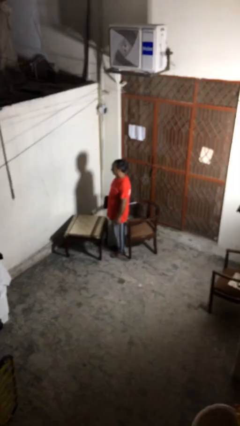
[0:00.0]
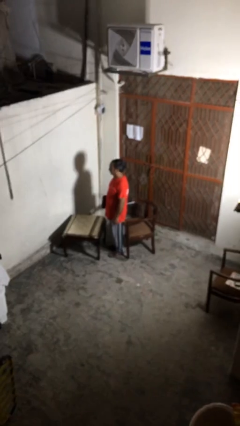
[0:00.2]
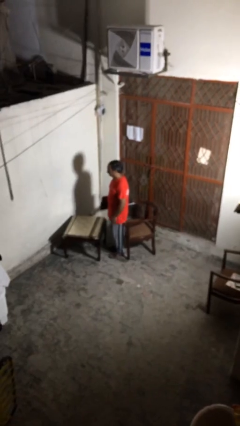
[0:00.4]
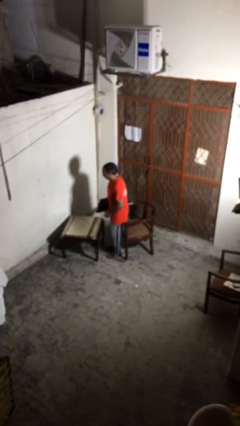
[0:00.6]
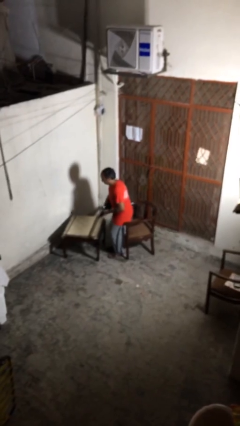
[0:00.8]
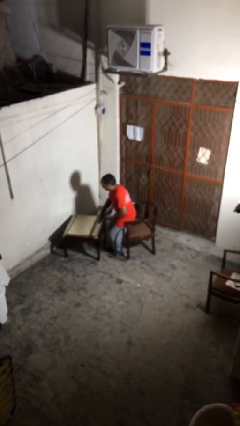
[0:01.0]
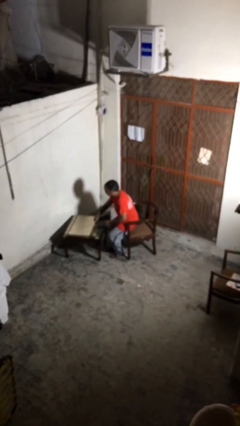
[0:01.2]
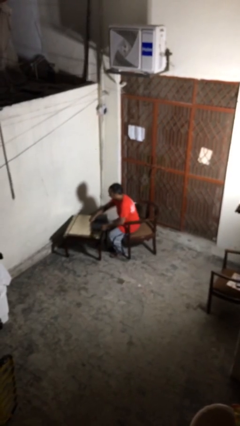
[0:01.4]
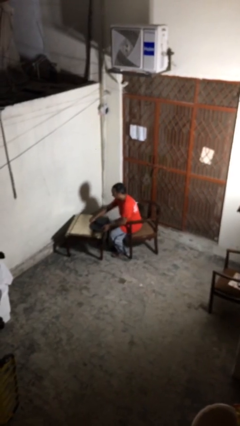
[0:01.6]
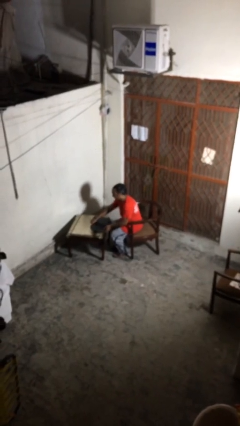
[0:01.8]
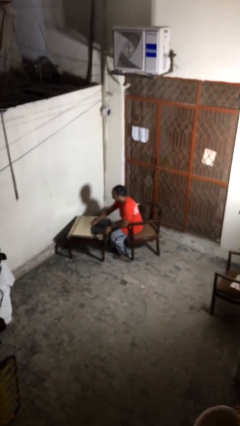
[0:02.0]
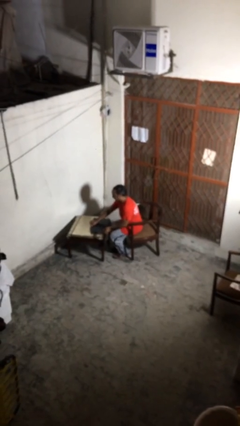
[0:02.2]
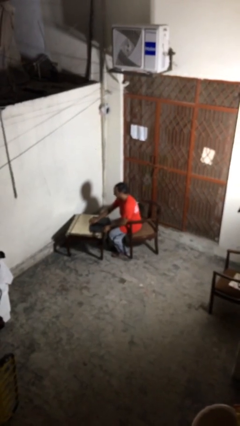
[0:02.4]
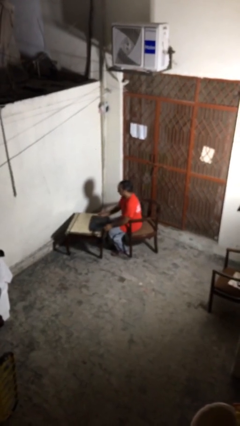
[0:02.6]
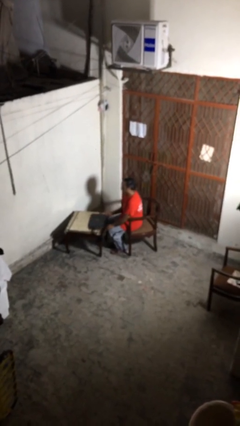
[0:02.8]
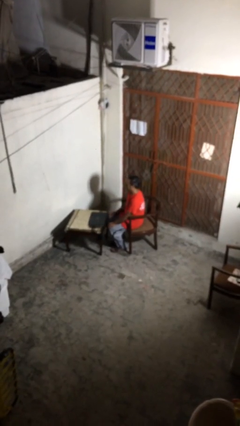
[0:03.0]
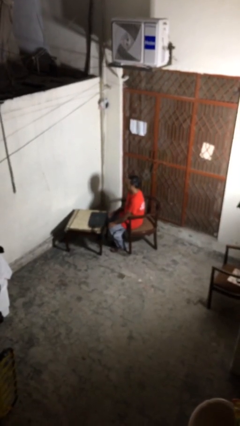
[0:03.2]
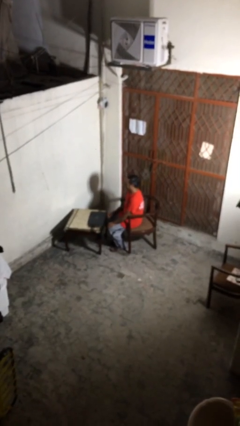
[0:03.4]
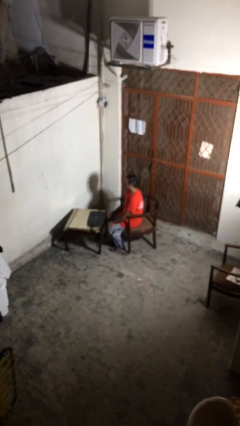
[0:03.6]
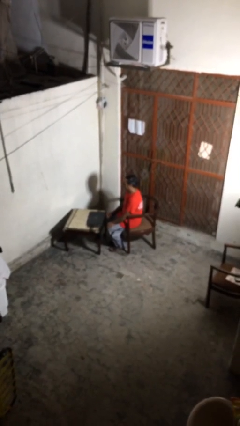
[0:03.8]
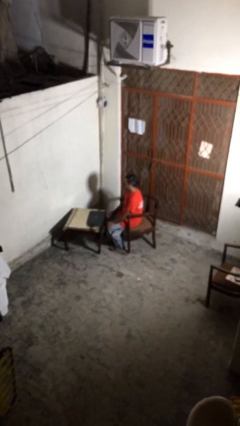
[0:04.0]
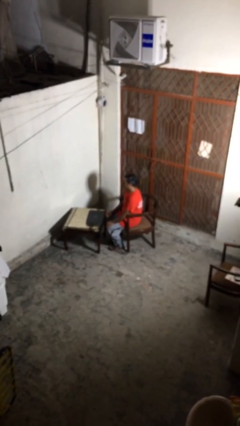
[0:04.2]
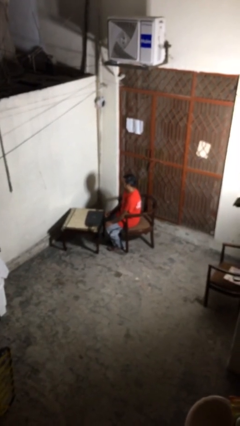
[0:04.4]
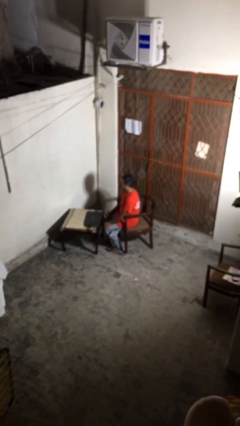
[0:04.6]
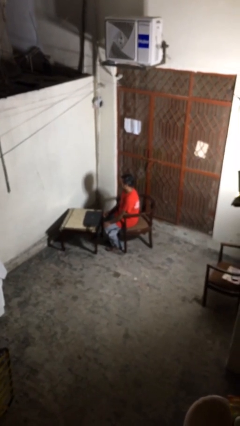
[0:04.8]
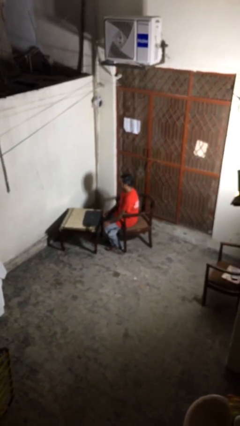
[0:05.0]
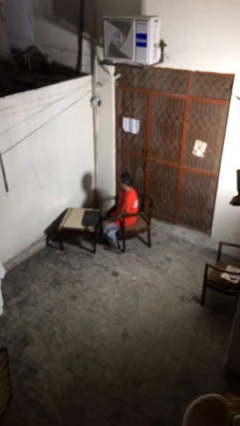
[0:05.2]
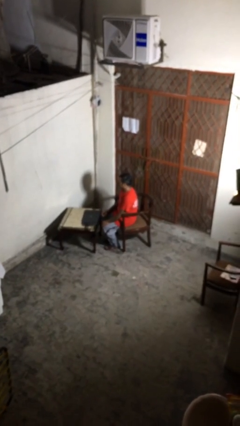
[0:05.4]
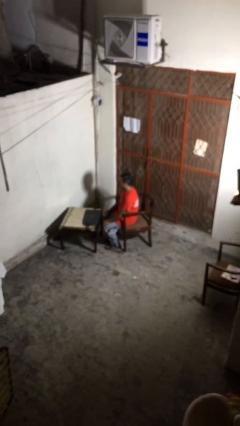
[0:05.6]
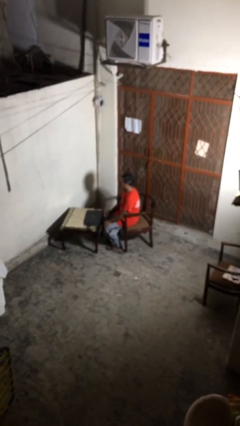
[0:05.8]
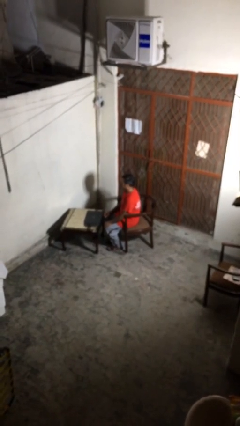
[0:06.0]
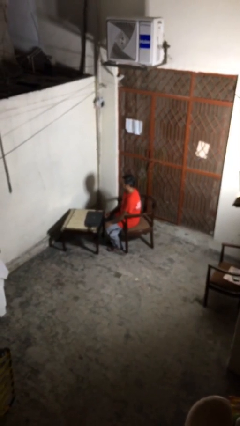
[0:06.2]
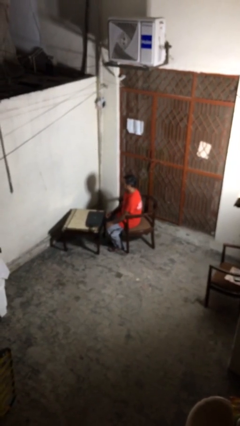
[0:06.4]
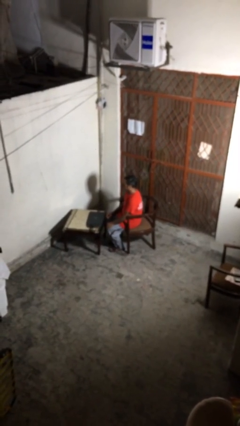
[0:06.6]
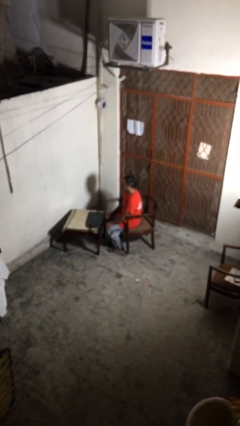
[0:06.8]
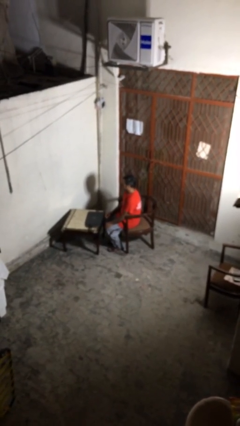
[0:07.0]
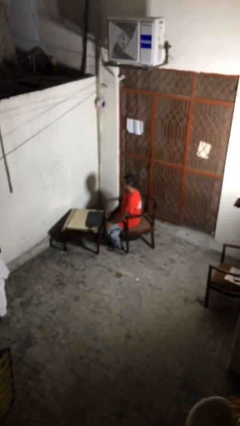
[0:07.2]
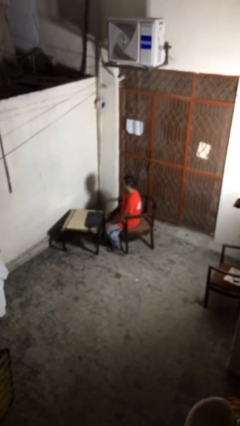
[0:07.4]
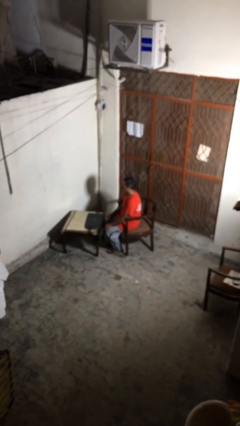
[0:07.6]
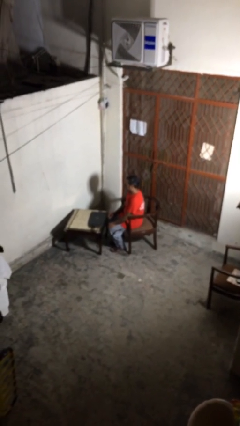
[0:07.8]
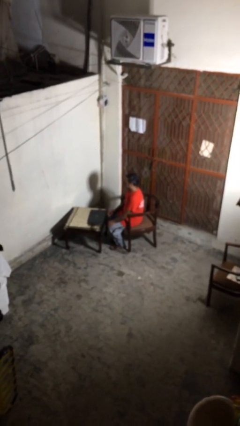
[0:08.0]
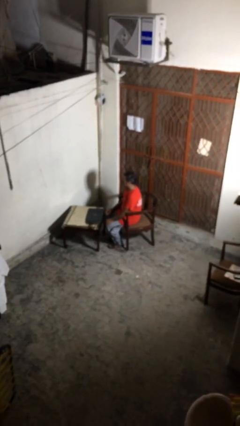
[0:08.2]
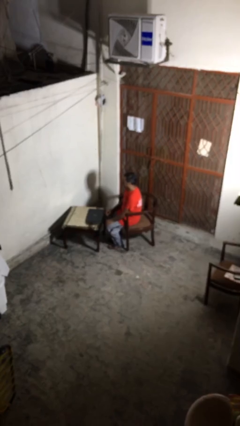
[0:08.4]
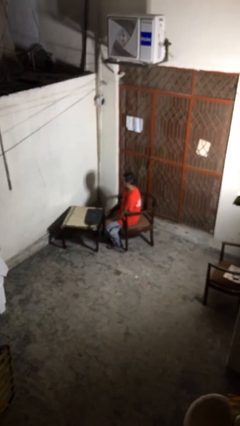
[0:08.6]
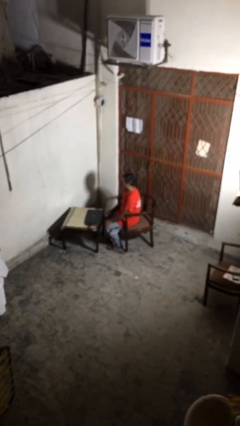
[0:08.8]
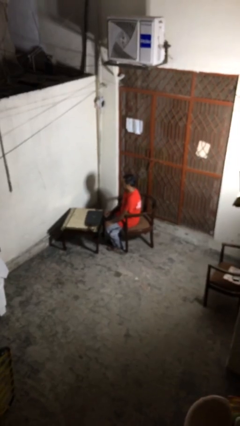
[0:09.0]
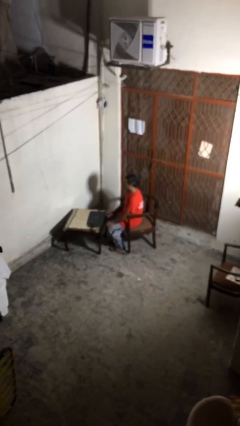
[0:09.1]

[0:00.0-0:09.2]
person sits down

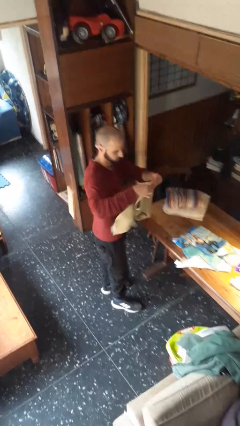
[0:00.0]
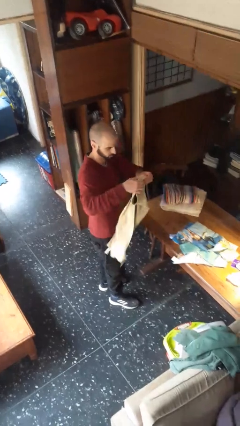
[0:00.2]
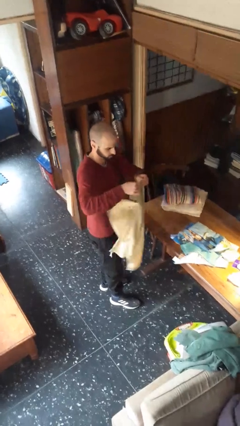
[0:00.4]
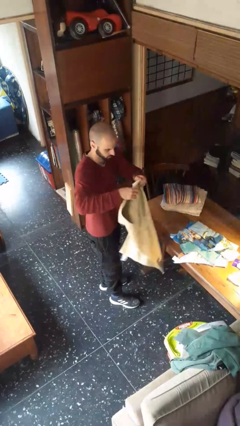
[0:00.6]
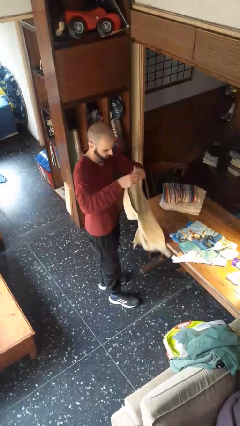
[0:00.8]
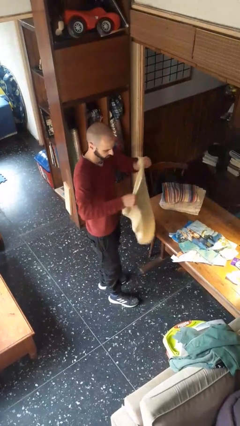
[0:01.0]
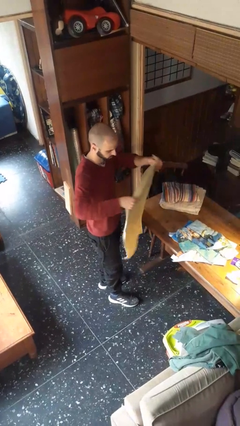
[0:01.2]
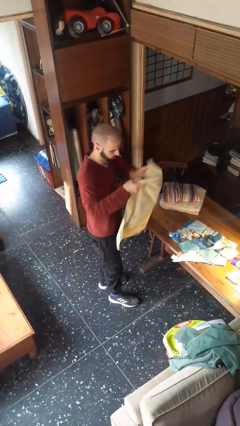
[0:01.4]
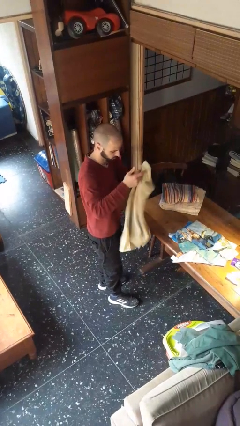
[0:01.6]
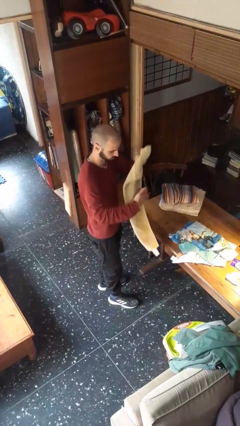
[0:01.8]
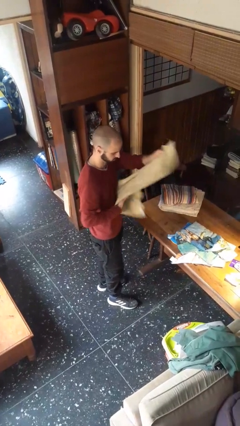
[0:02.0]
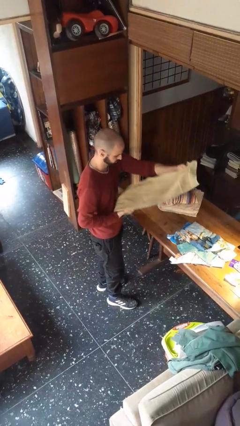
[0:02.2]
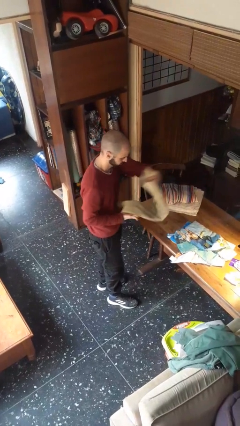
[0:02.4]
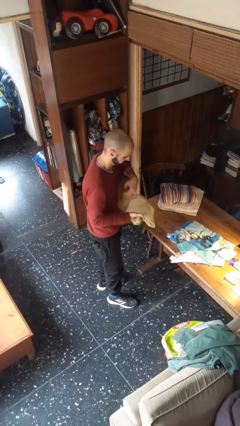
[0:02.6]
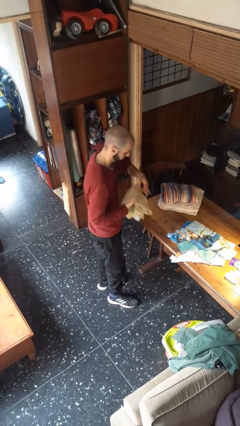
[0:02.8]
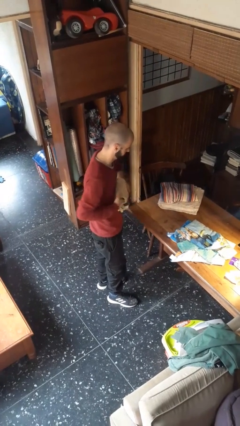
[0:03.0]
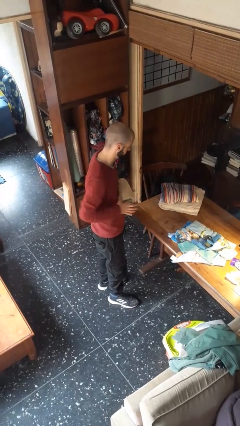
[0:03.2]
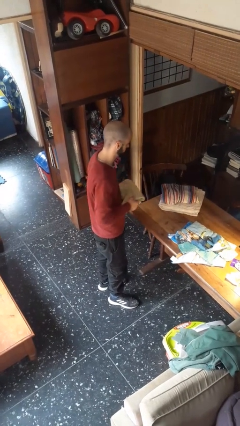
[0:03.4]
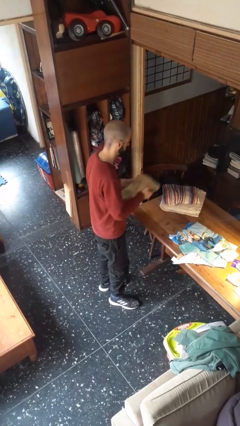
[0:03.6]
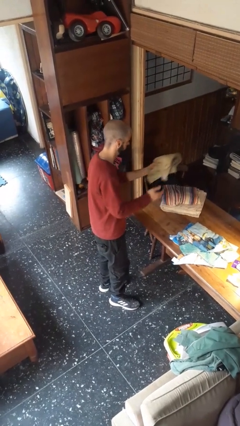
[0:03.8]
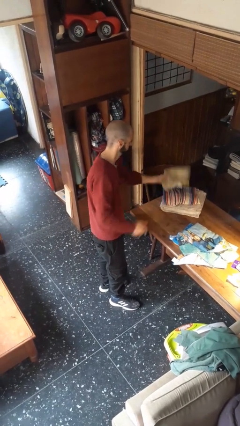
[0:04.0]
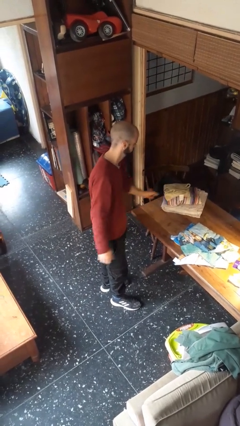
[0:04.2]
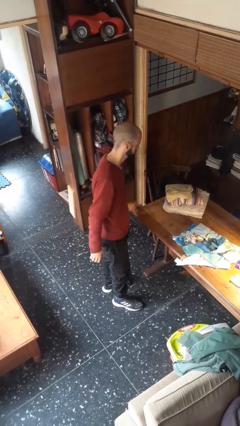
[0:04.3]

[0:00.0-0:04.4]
person folds towel

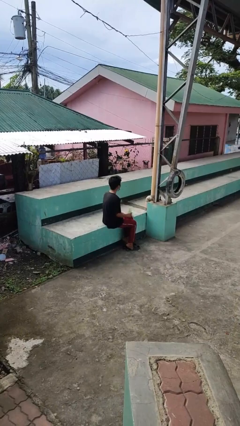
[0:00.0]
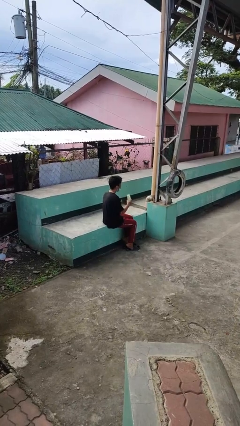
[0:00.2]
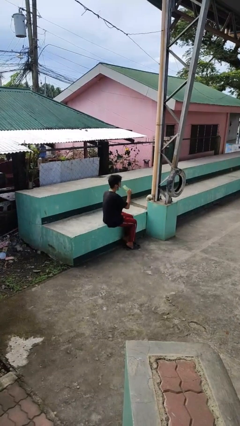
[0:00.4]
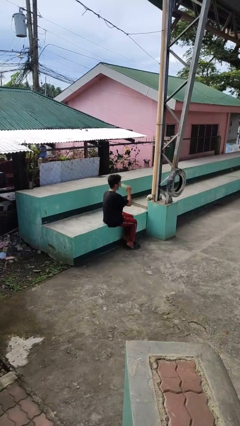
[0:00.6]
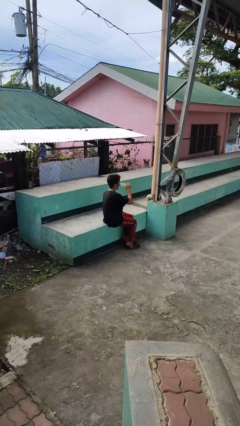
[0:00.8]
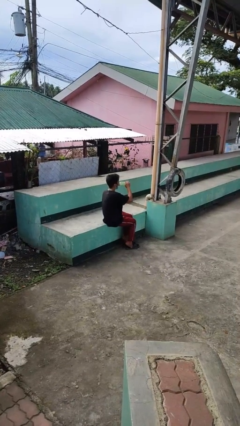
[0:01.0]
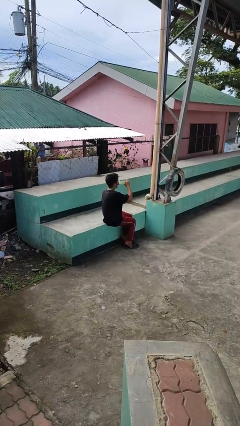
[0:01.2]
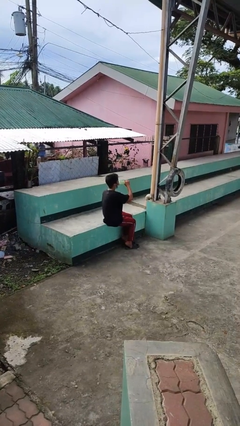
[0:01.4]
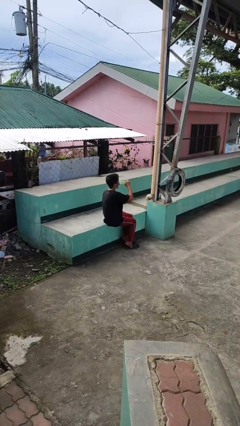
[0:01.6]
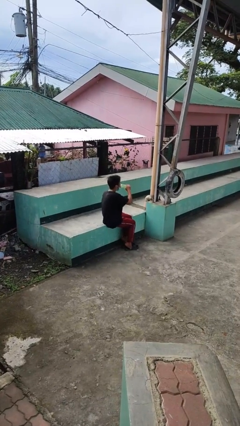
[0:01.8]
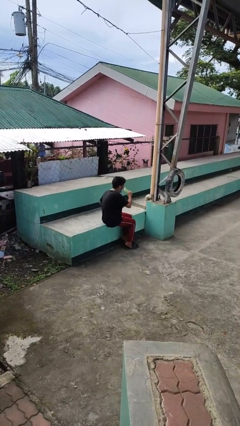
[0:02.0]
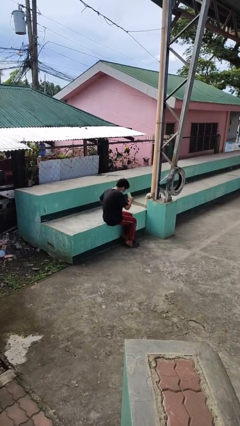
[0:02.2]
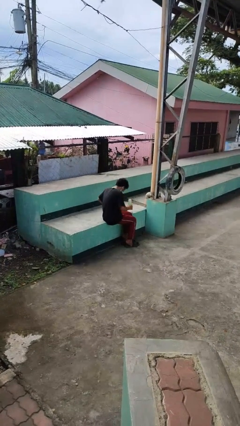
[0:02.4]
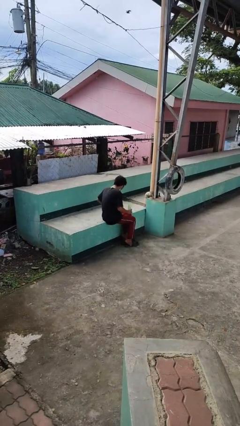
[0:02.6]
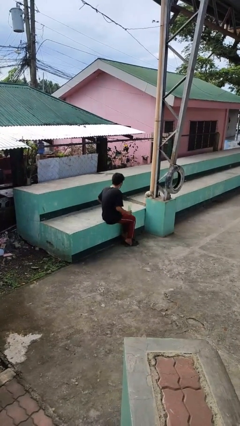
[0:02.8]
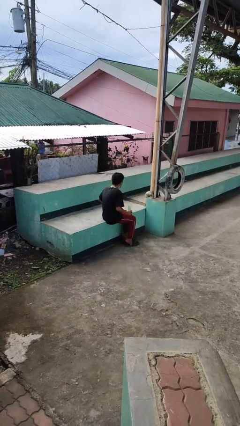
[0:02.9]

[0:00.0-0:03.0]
person drinks from bottle

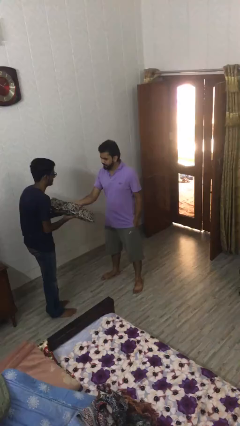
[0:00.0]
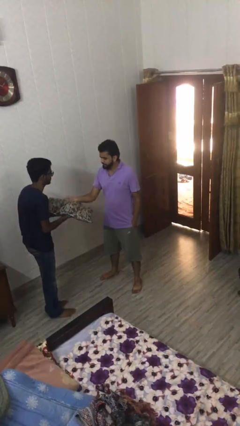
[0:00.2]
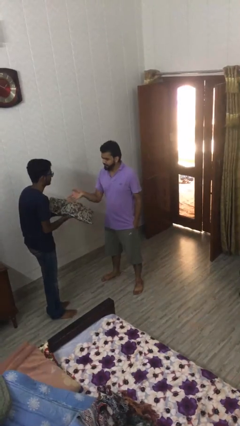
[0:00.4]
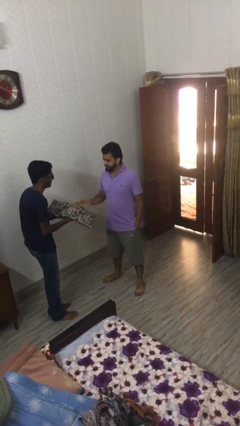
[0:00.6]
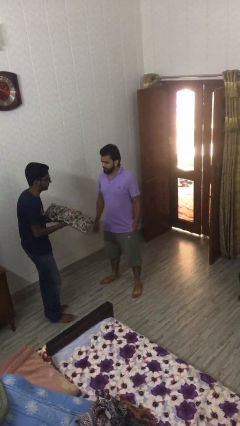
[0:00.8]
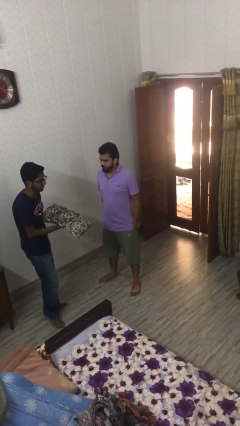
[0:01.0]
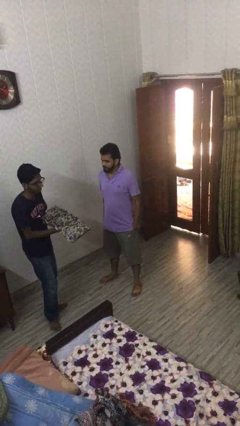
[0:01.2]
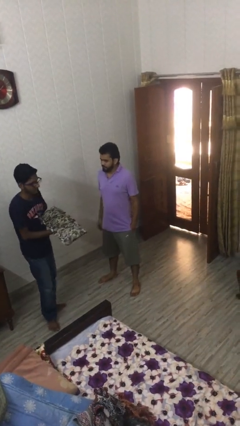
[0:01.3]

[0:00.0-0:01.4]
person transfers object to person
